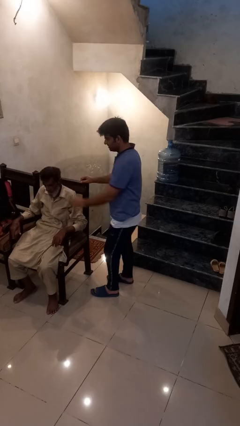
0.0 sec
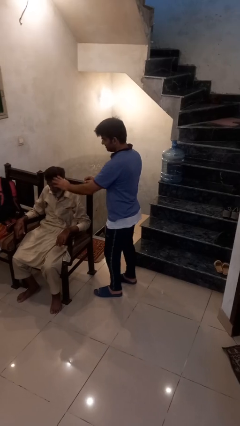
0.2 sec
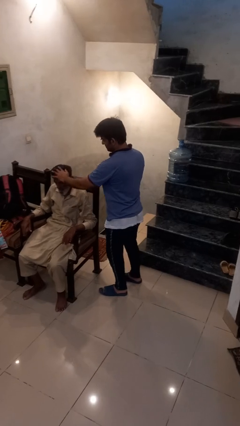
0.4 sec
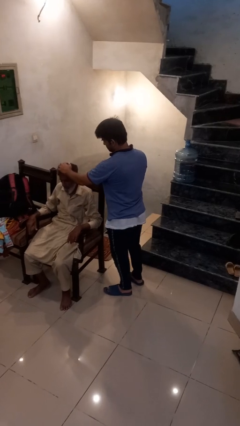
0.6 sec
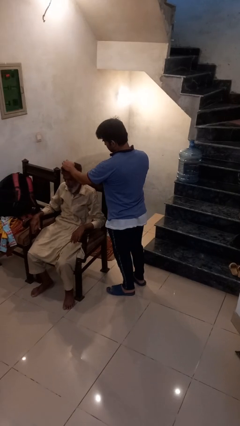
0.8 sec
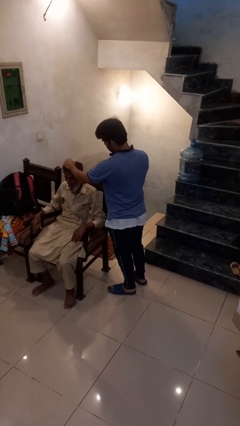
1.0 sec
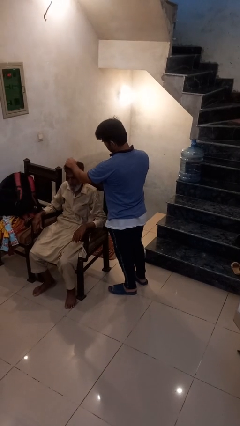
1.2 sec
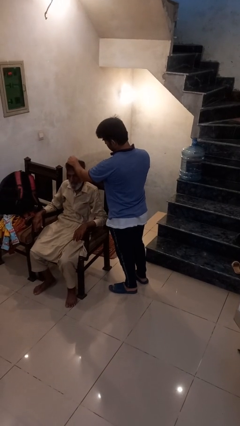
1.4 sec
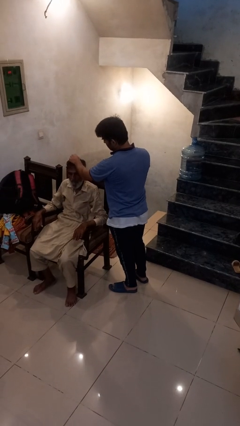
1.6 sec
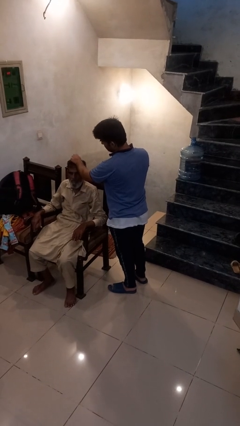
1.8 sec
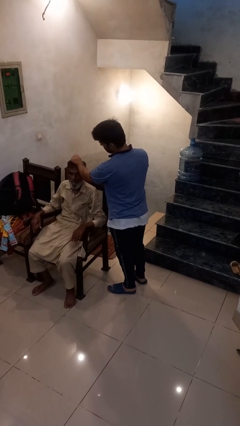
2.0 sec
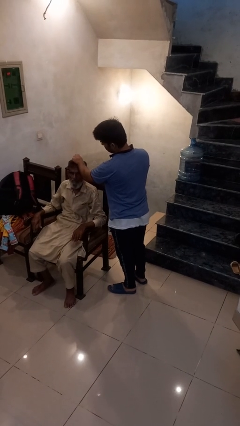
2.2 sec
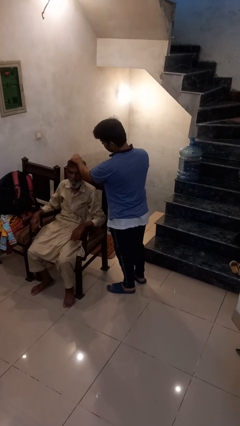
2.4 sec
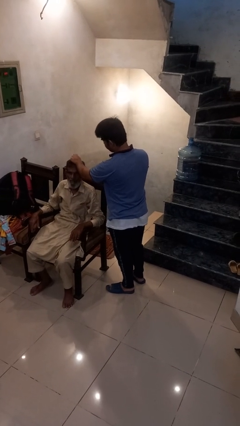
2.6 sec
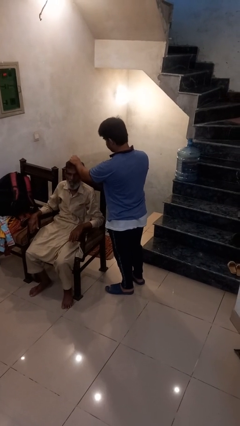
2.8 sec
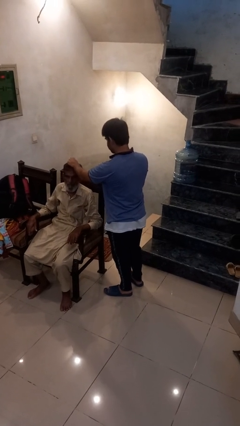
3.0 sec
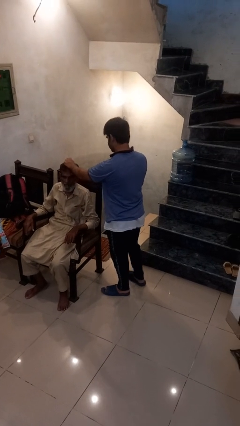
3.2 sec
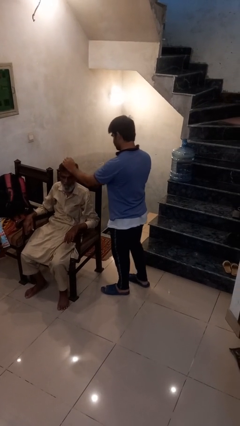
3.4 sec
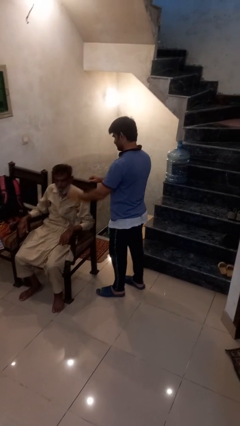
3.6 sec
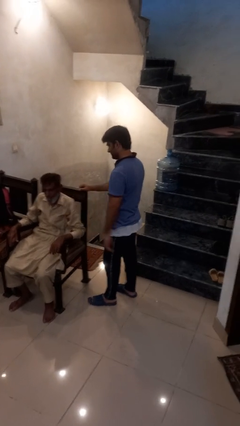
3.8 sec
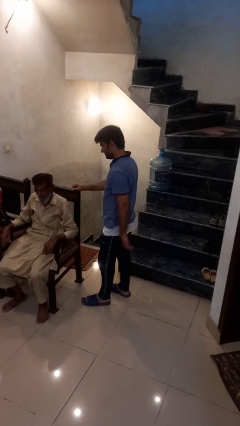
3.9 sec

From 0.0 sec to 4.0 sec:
person grabs person by hair

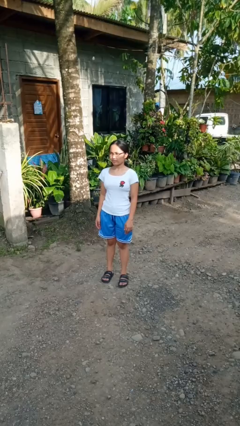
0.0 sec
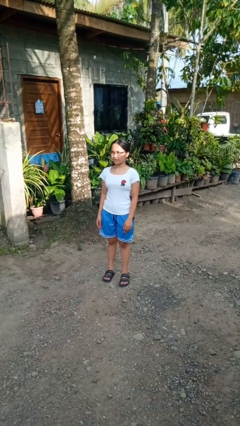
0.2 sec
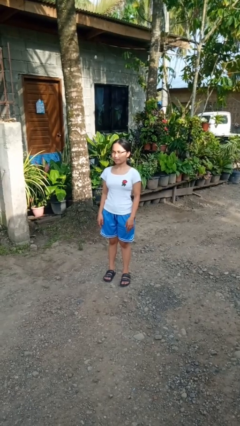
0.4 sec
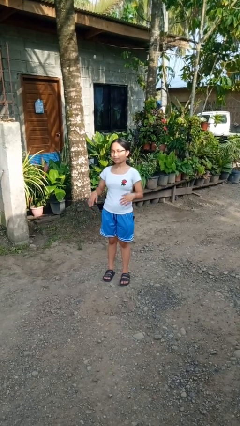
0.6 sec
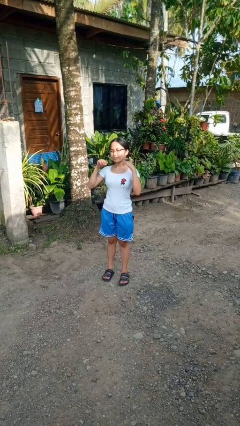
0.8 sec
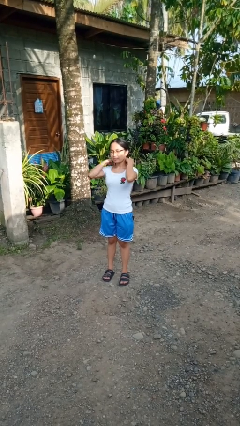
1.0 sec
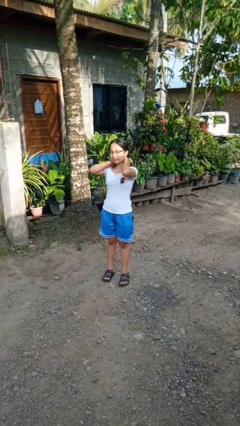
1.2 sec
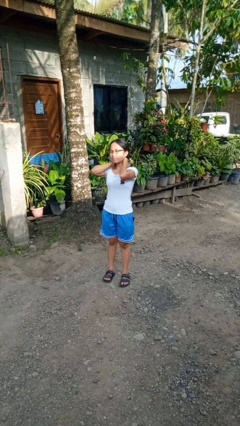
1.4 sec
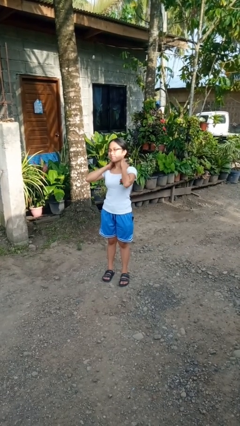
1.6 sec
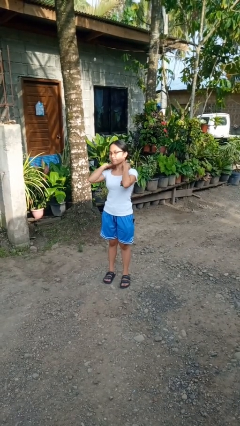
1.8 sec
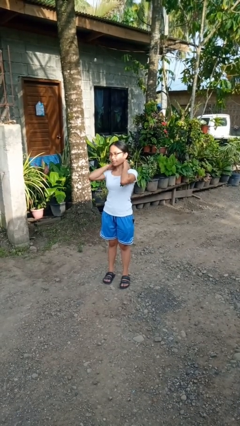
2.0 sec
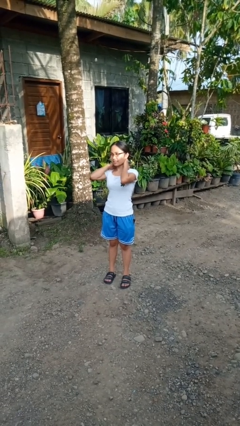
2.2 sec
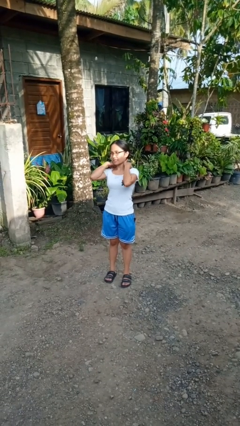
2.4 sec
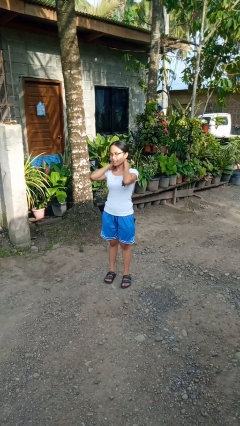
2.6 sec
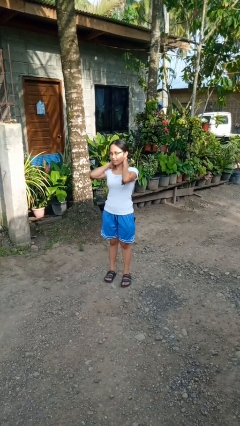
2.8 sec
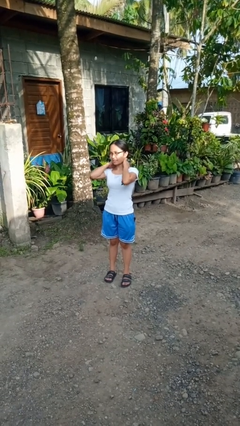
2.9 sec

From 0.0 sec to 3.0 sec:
person rubs neck

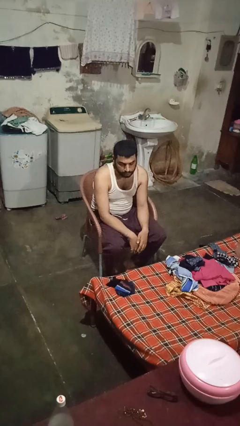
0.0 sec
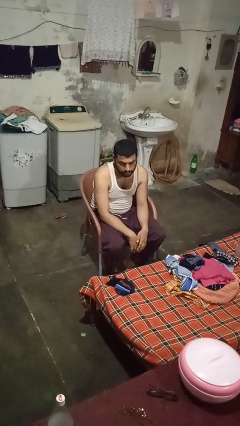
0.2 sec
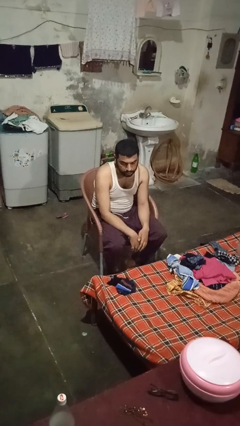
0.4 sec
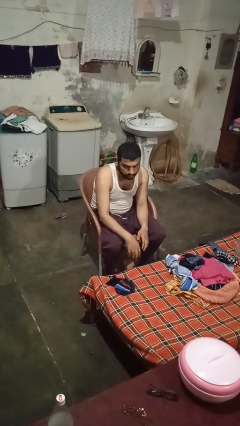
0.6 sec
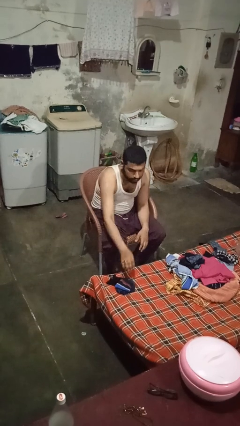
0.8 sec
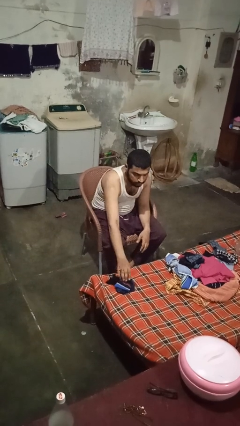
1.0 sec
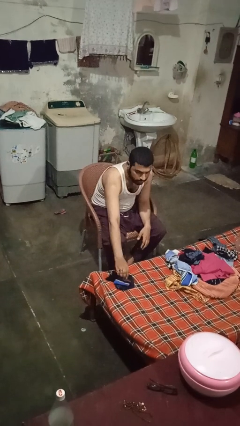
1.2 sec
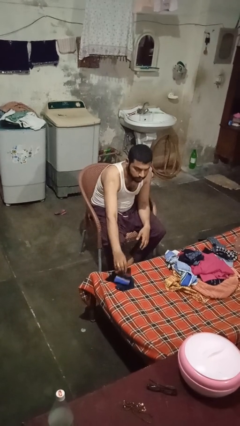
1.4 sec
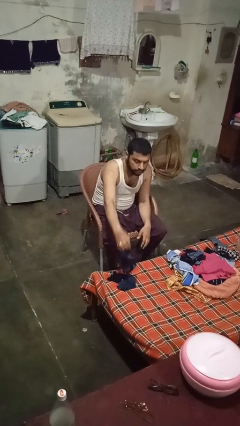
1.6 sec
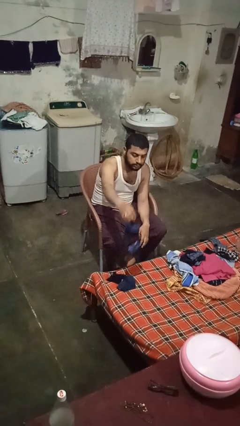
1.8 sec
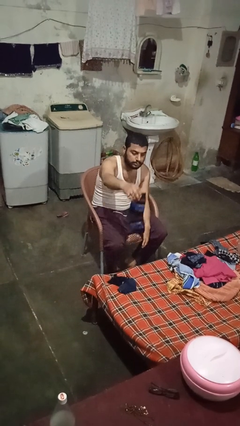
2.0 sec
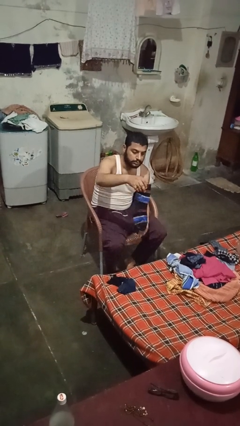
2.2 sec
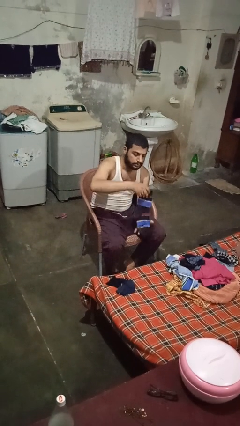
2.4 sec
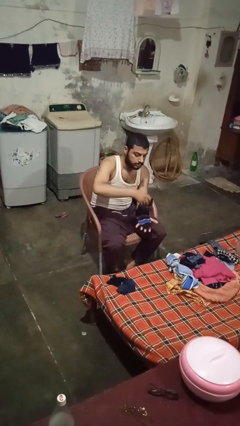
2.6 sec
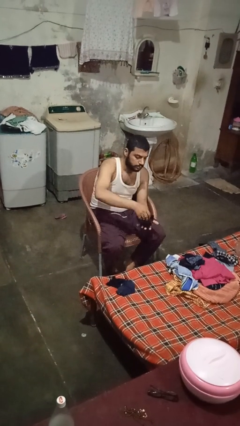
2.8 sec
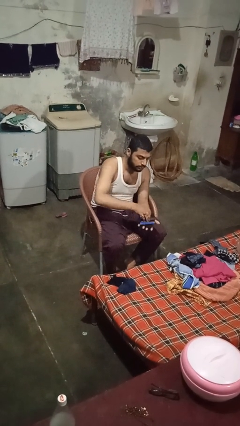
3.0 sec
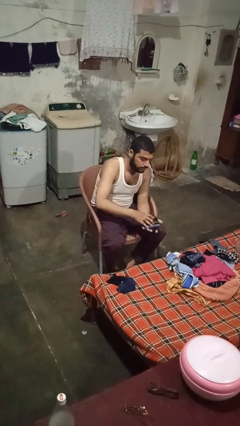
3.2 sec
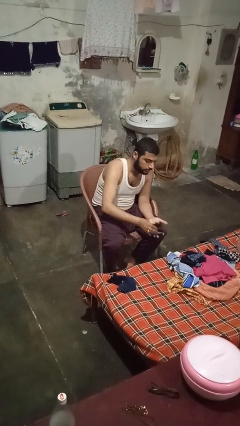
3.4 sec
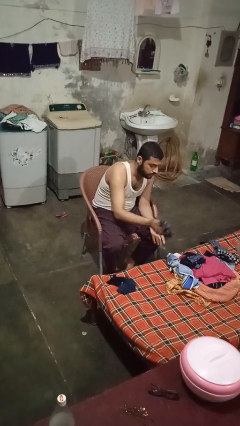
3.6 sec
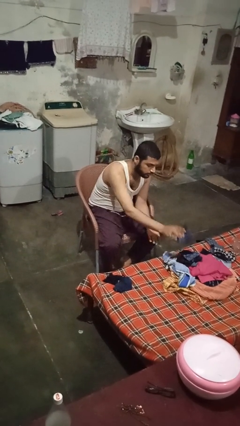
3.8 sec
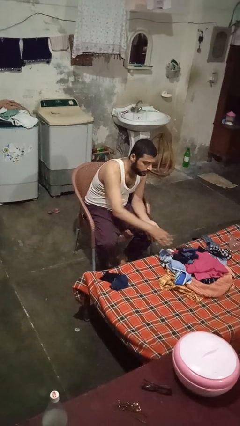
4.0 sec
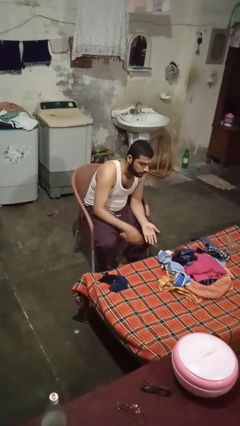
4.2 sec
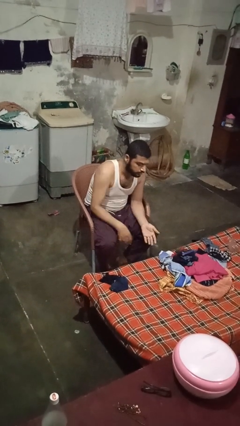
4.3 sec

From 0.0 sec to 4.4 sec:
person folds socks

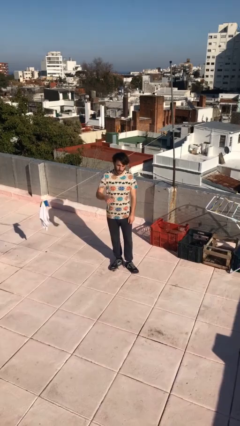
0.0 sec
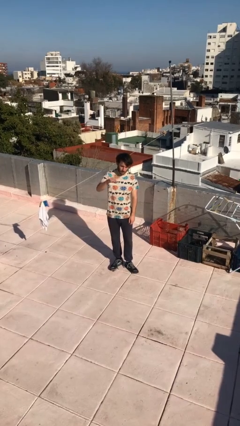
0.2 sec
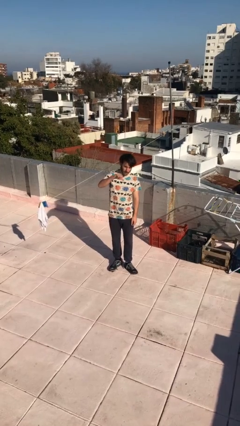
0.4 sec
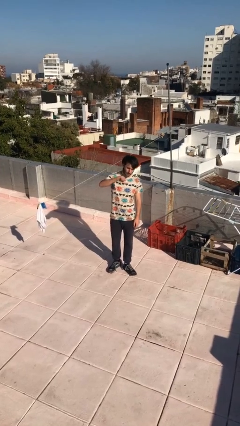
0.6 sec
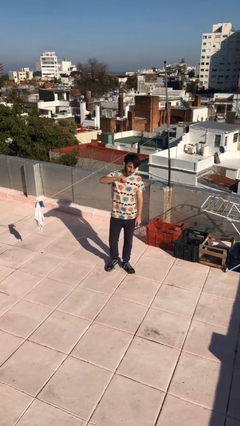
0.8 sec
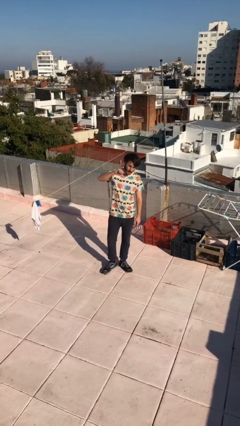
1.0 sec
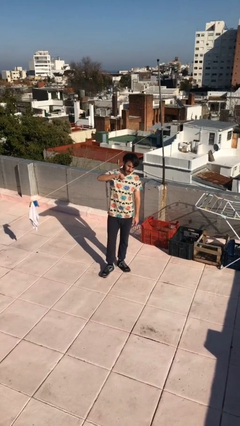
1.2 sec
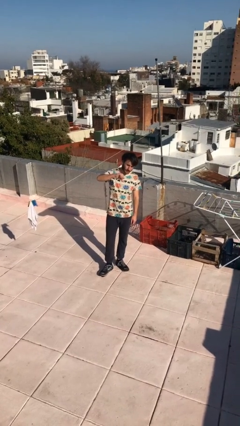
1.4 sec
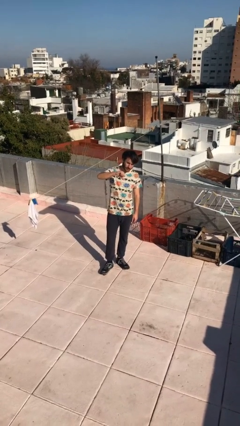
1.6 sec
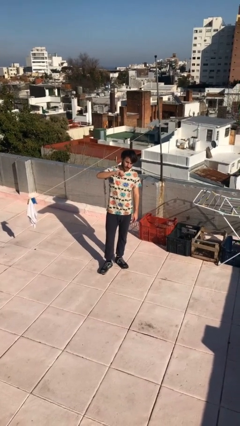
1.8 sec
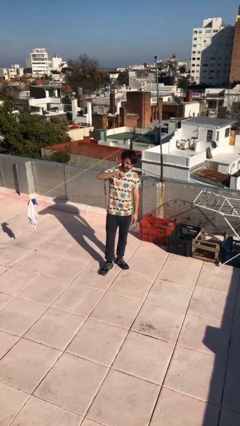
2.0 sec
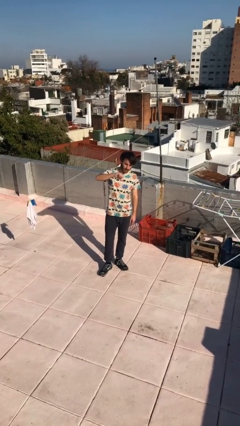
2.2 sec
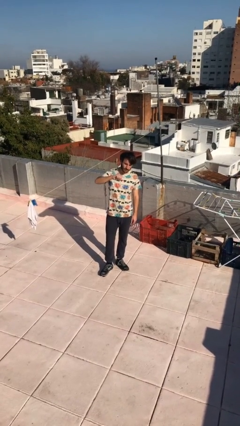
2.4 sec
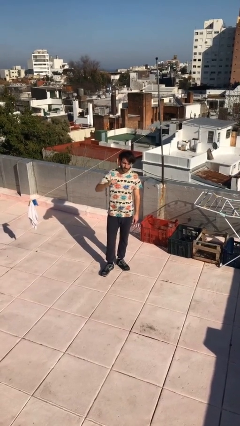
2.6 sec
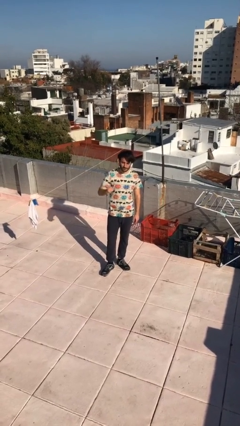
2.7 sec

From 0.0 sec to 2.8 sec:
person gestures thumbs down

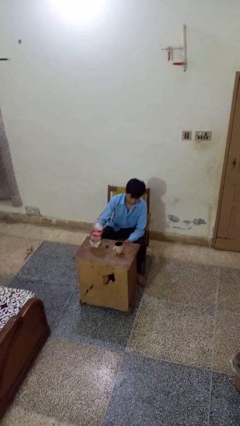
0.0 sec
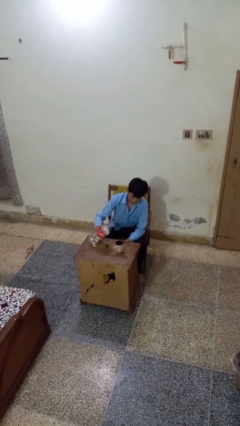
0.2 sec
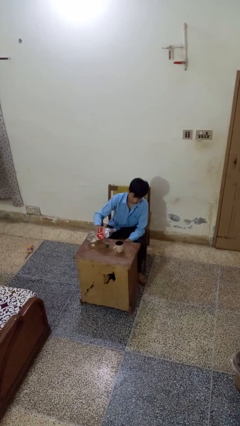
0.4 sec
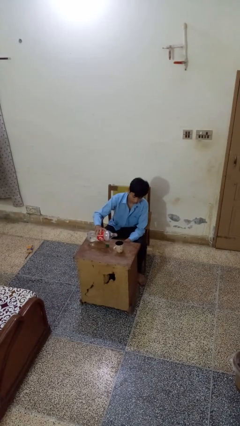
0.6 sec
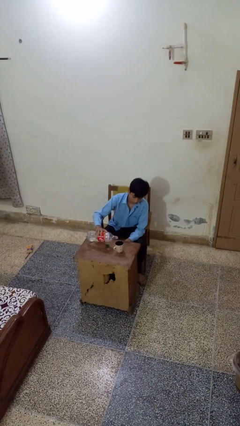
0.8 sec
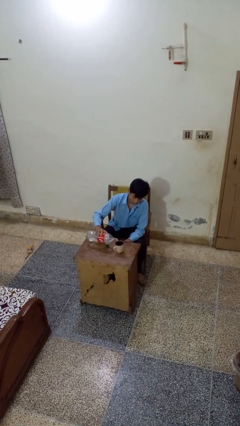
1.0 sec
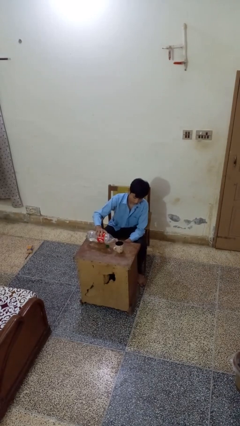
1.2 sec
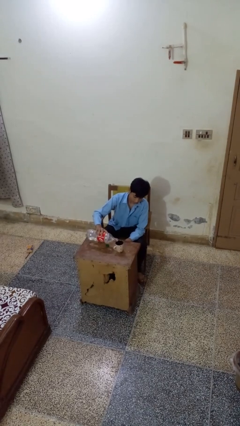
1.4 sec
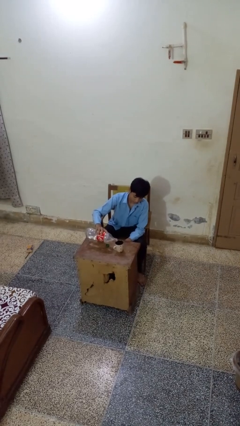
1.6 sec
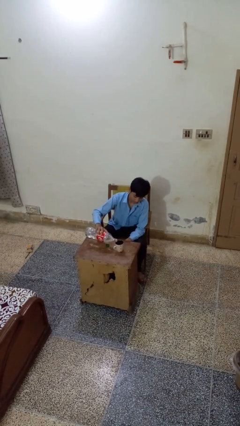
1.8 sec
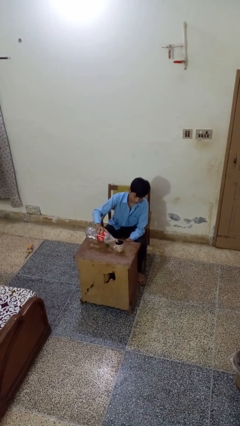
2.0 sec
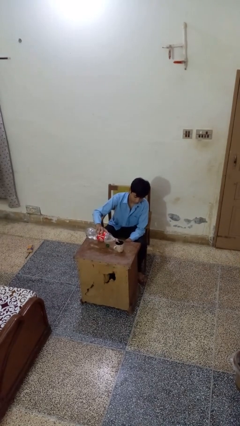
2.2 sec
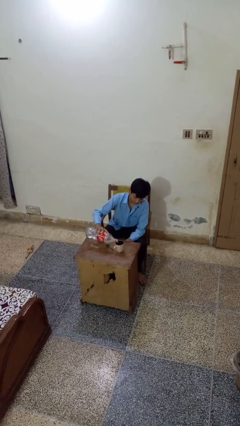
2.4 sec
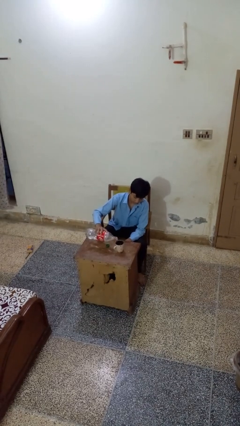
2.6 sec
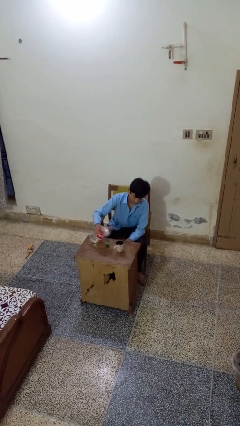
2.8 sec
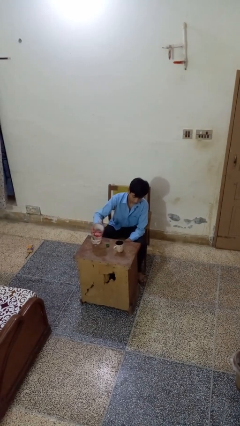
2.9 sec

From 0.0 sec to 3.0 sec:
person pours liquid into cup
